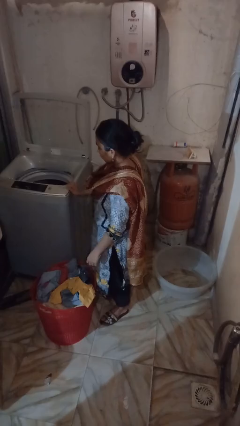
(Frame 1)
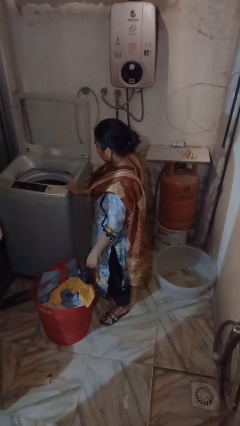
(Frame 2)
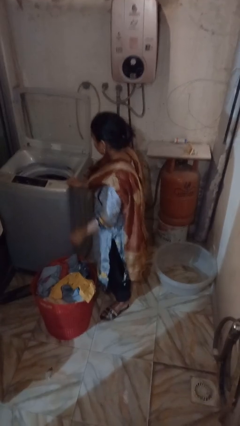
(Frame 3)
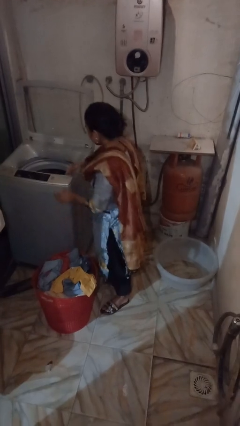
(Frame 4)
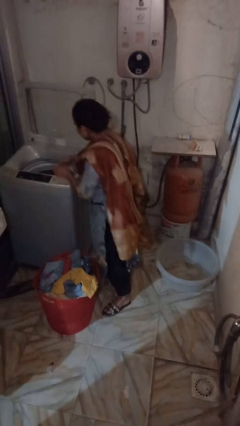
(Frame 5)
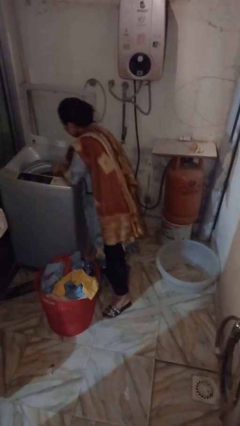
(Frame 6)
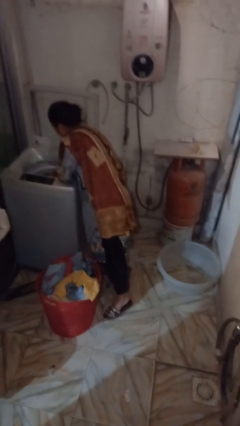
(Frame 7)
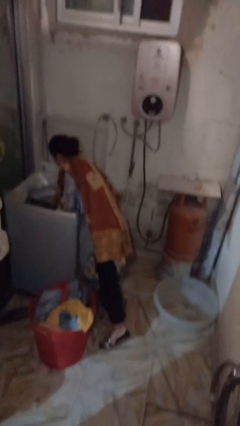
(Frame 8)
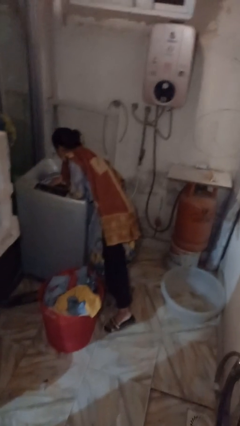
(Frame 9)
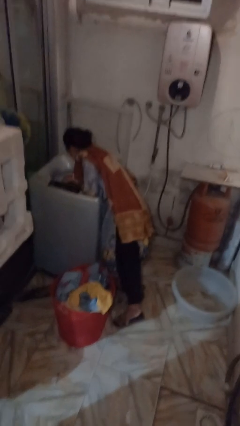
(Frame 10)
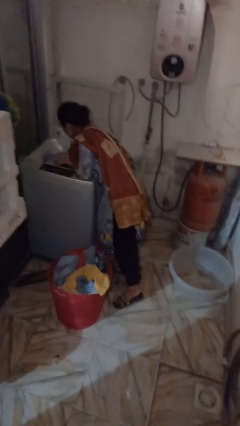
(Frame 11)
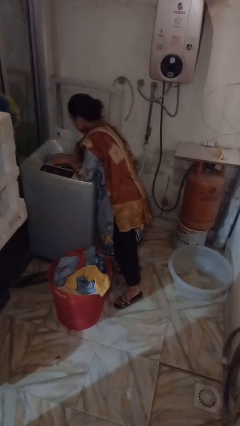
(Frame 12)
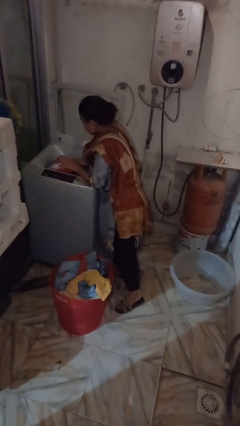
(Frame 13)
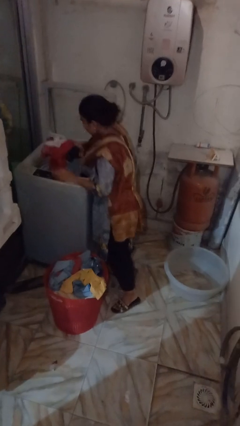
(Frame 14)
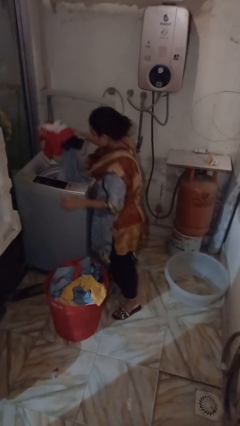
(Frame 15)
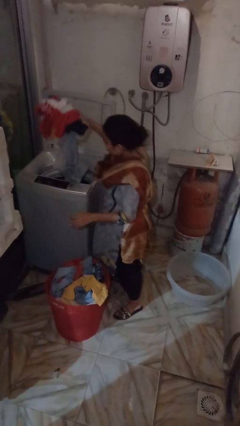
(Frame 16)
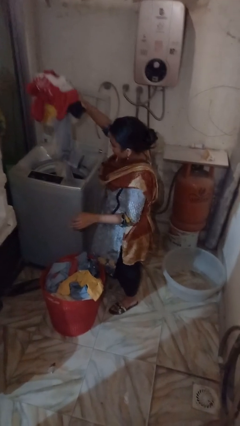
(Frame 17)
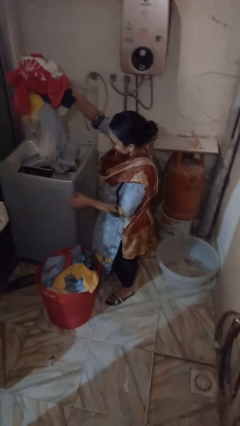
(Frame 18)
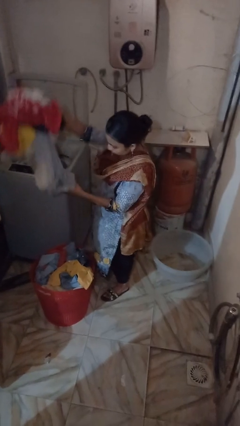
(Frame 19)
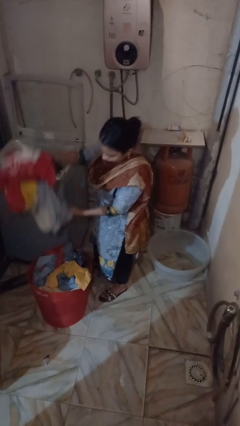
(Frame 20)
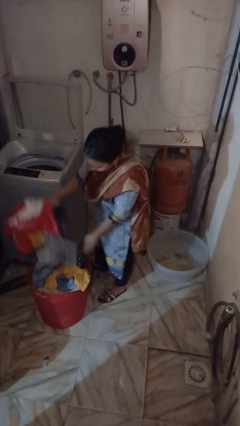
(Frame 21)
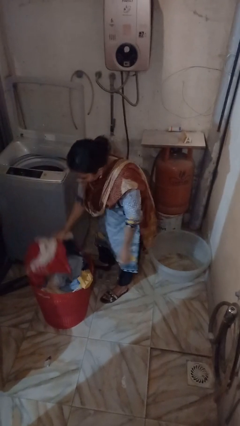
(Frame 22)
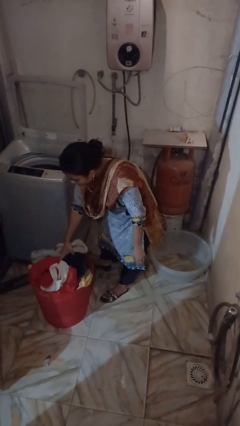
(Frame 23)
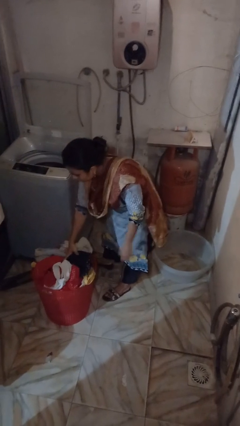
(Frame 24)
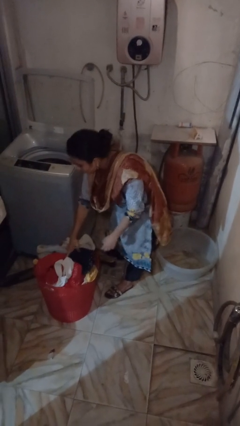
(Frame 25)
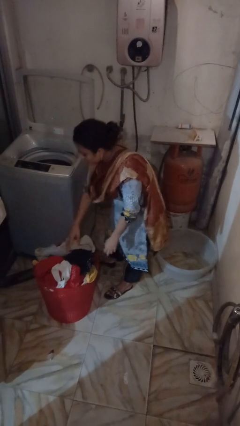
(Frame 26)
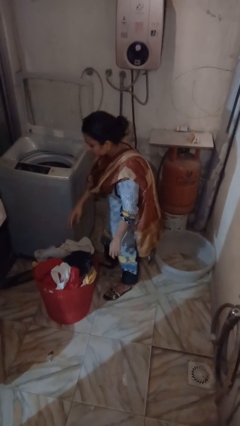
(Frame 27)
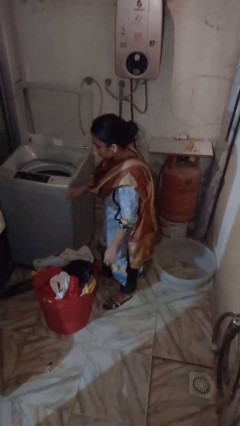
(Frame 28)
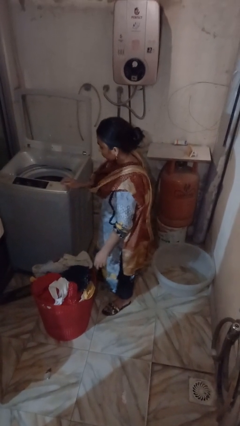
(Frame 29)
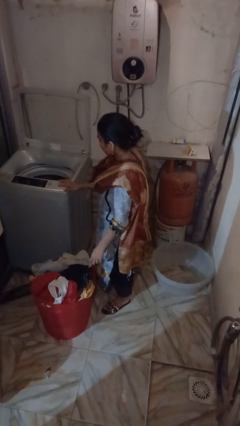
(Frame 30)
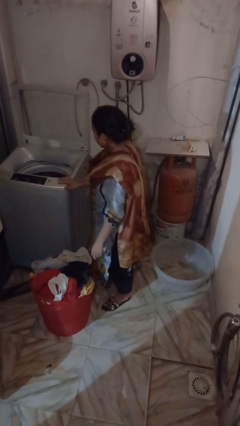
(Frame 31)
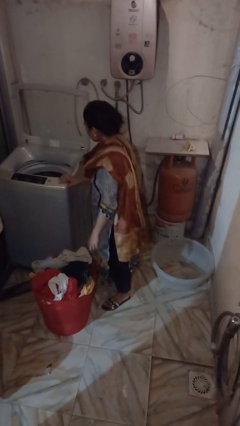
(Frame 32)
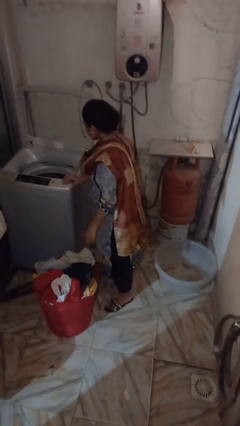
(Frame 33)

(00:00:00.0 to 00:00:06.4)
person unloads dryer

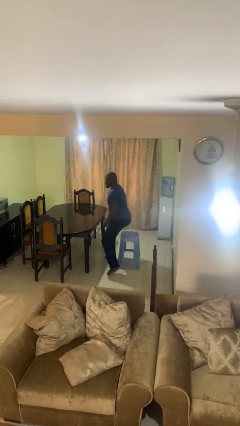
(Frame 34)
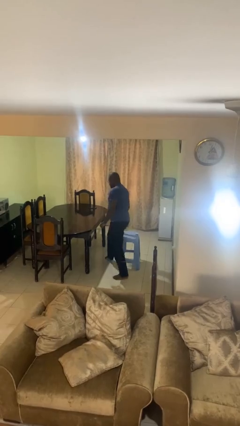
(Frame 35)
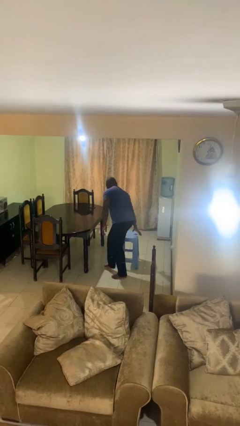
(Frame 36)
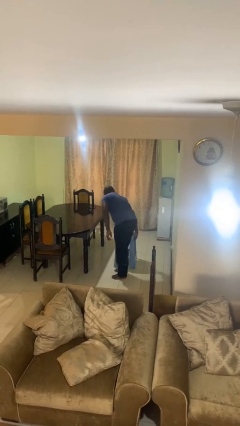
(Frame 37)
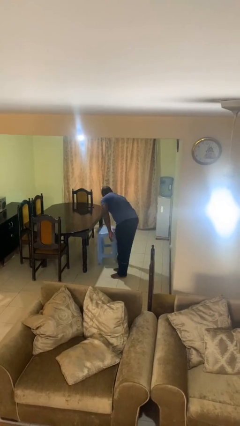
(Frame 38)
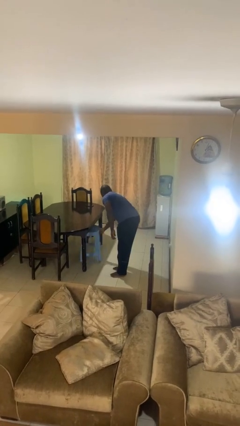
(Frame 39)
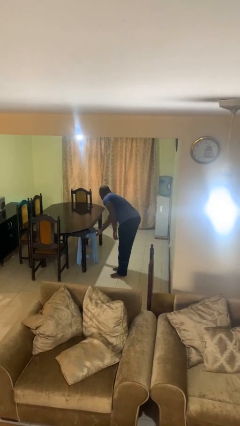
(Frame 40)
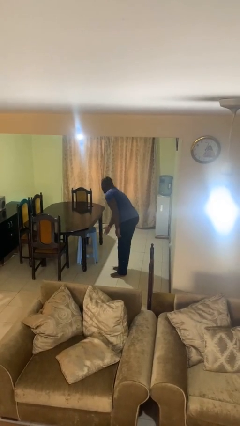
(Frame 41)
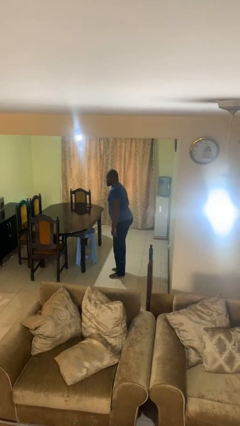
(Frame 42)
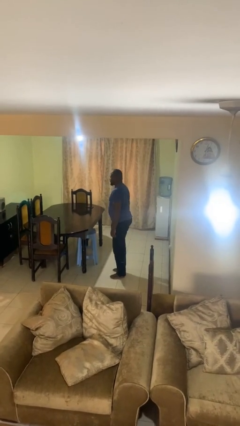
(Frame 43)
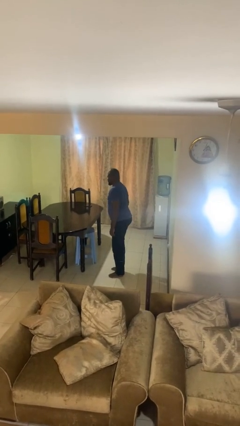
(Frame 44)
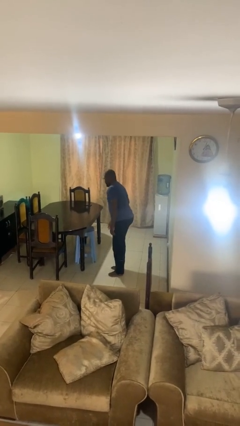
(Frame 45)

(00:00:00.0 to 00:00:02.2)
person stands up

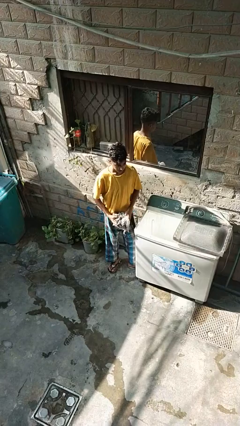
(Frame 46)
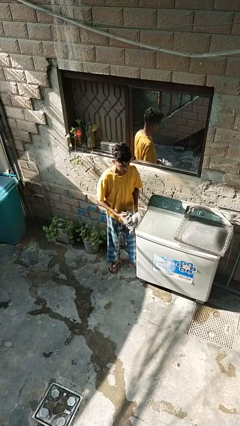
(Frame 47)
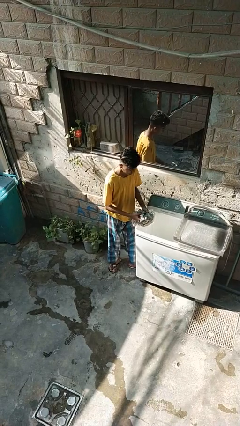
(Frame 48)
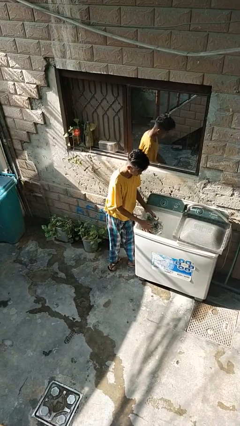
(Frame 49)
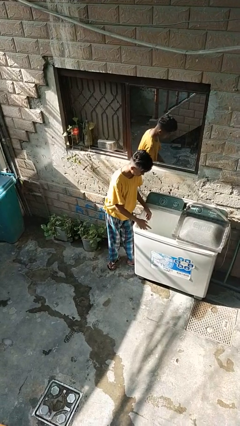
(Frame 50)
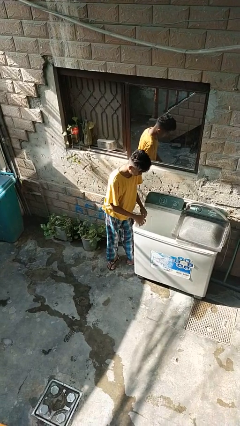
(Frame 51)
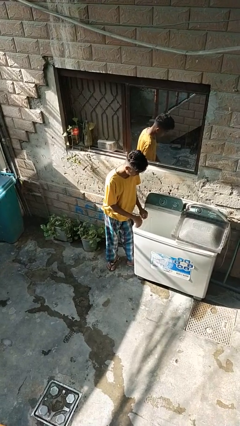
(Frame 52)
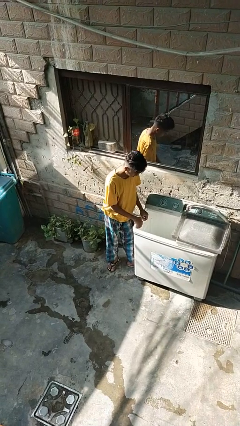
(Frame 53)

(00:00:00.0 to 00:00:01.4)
person loads clotheswasher

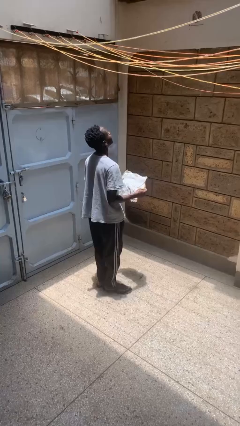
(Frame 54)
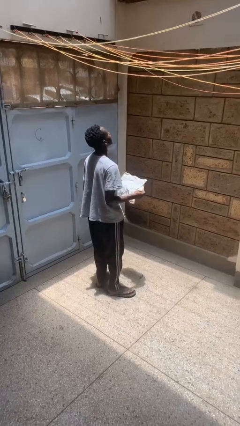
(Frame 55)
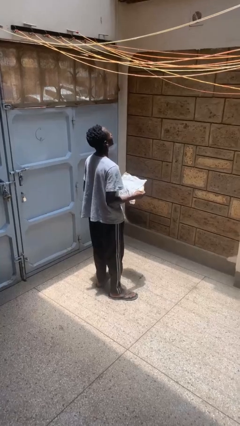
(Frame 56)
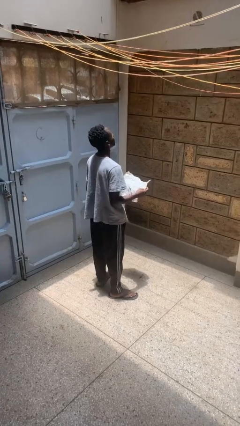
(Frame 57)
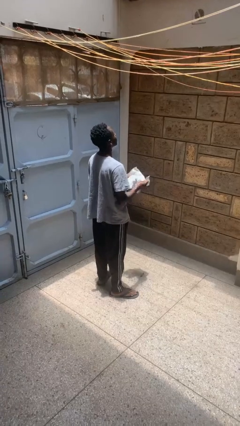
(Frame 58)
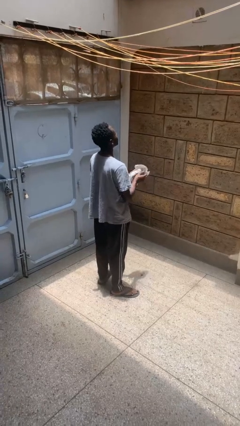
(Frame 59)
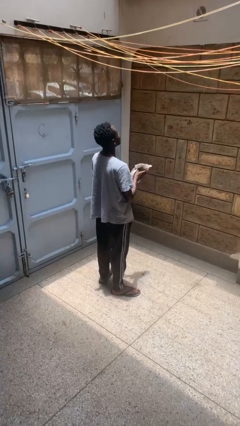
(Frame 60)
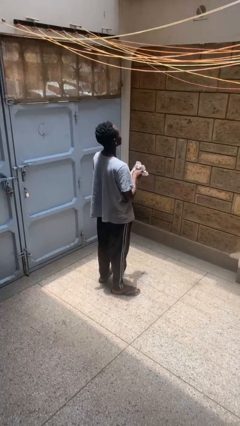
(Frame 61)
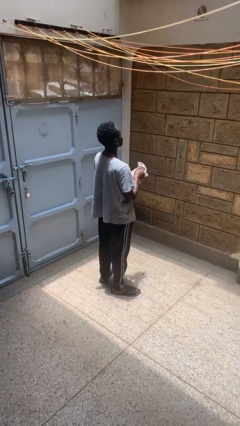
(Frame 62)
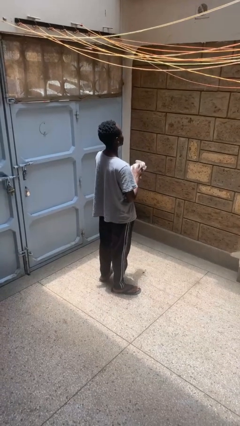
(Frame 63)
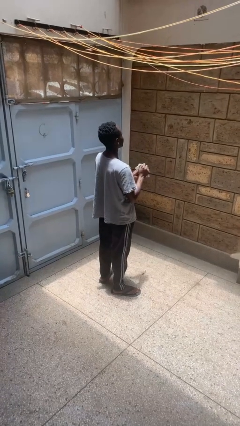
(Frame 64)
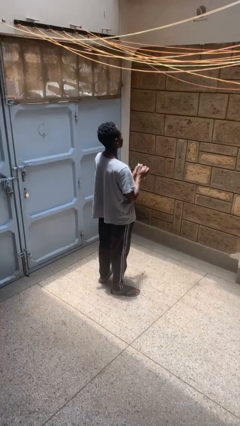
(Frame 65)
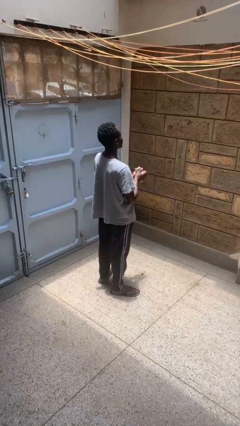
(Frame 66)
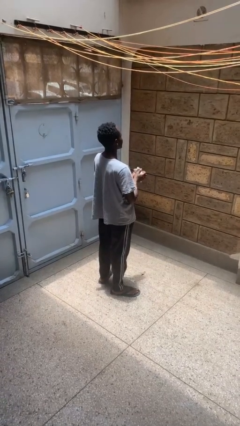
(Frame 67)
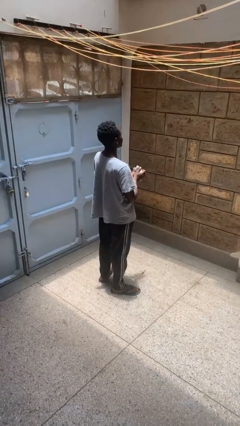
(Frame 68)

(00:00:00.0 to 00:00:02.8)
person crumples paper

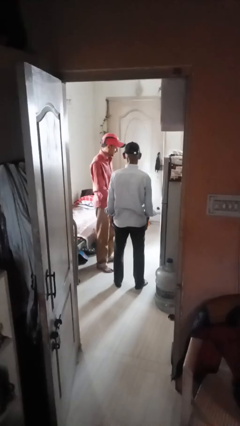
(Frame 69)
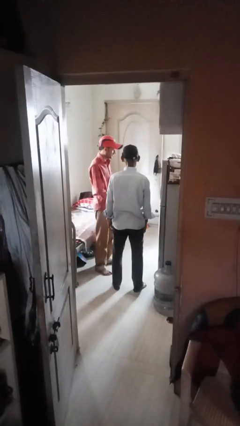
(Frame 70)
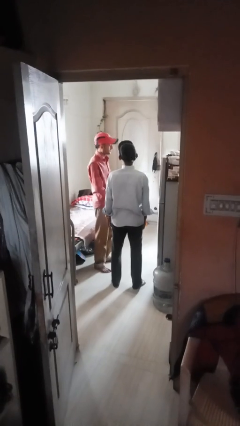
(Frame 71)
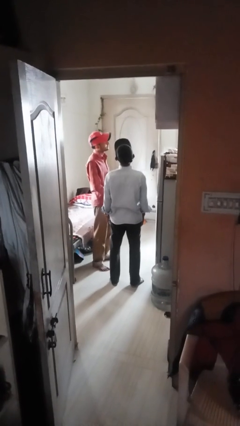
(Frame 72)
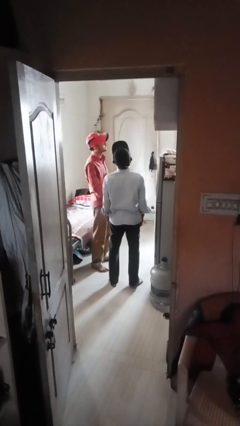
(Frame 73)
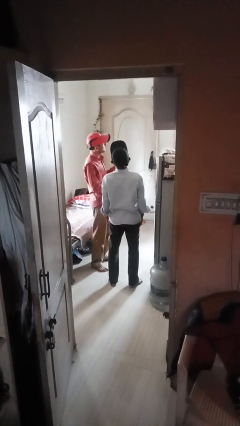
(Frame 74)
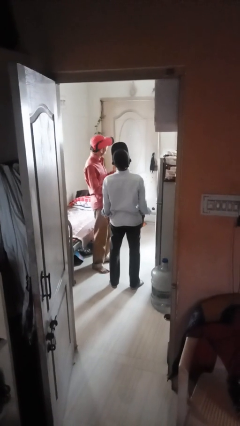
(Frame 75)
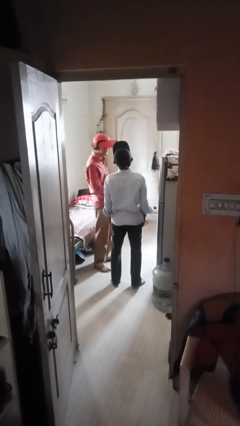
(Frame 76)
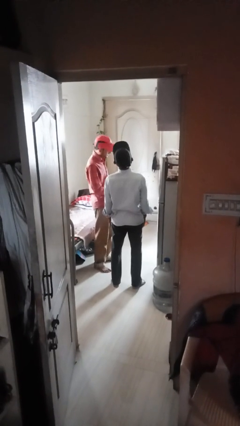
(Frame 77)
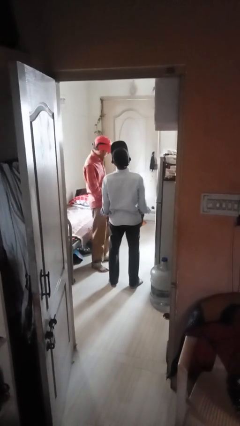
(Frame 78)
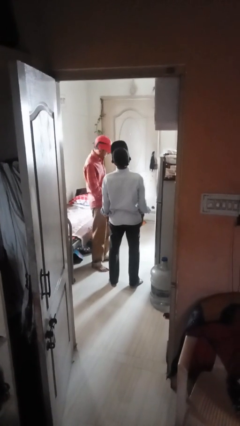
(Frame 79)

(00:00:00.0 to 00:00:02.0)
person laughs with person

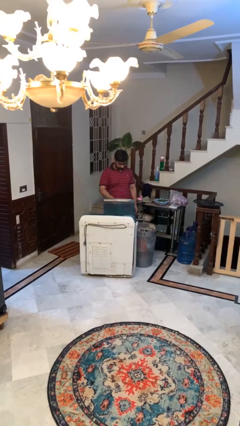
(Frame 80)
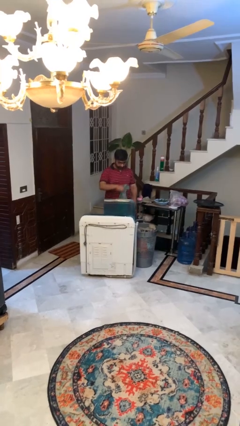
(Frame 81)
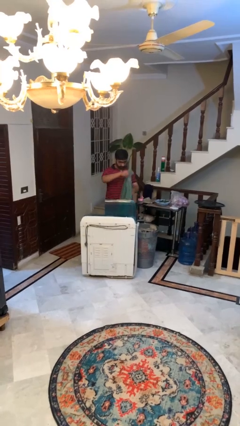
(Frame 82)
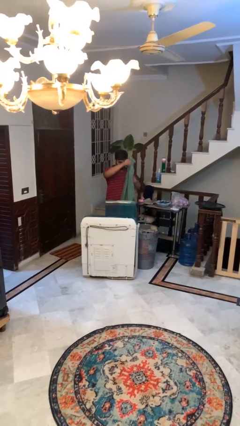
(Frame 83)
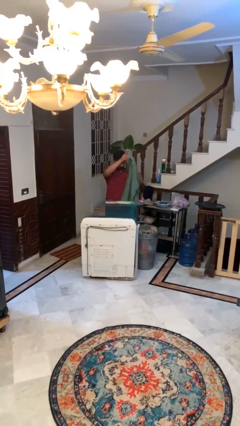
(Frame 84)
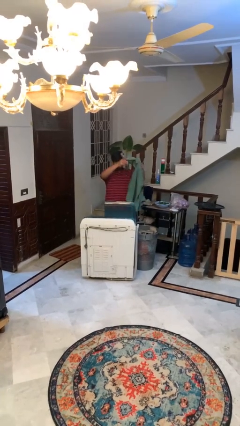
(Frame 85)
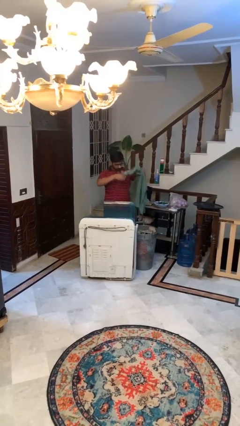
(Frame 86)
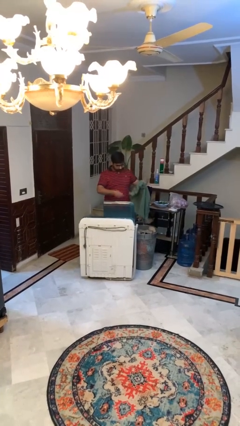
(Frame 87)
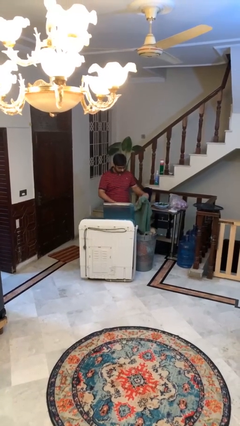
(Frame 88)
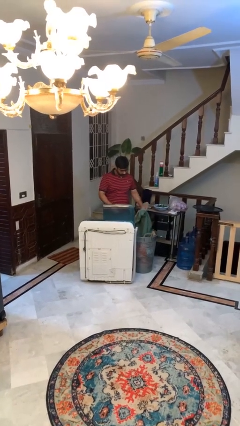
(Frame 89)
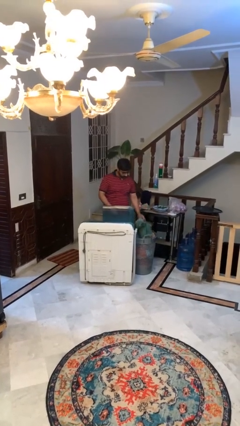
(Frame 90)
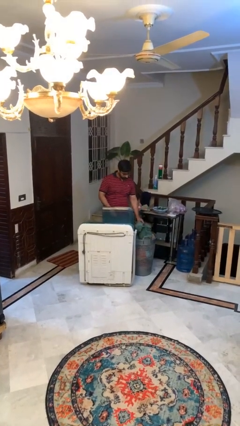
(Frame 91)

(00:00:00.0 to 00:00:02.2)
person unloads clotheswasher
